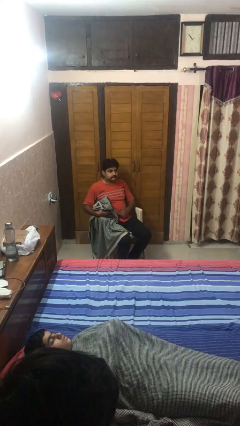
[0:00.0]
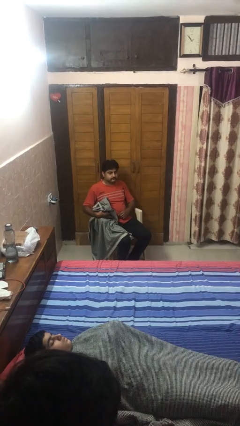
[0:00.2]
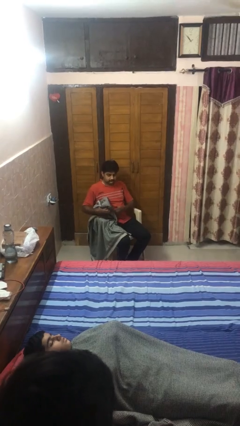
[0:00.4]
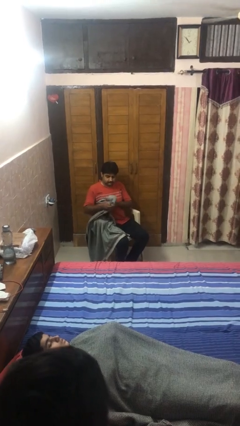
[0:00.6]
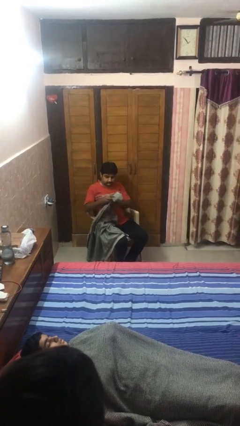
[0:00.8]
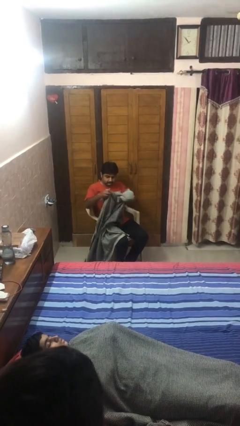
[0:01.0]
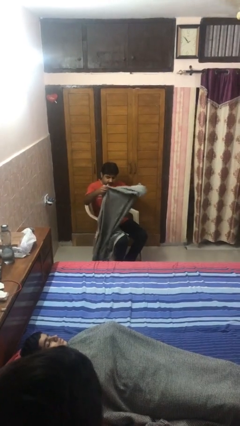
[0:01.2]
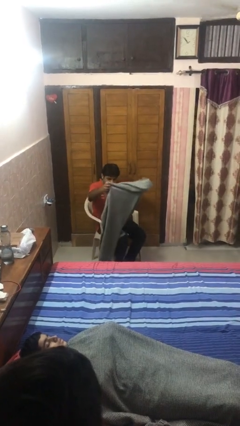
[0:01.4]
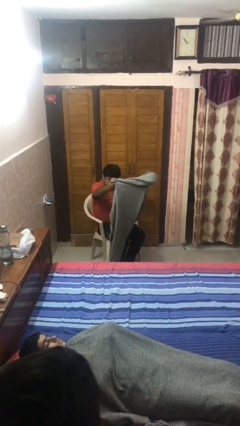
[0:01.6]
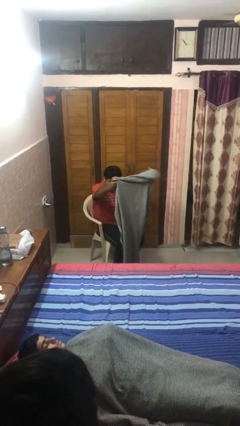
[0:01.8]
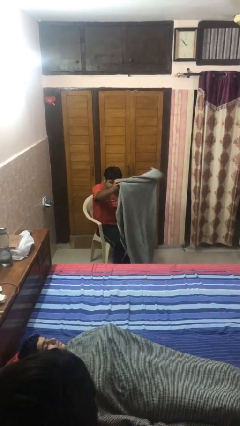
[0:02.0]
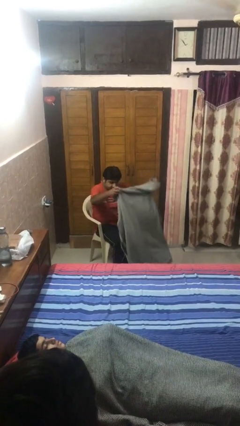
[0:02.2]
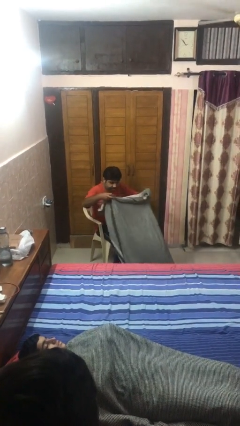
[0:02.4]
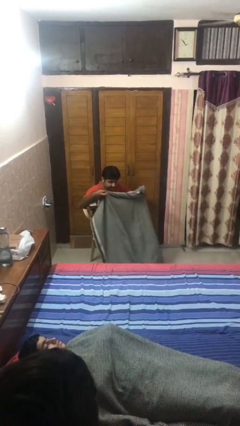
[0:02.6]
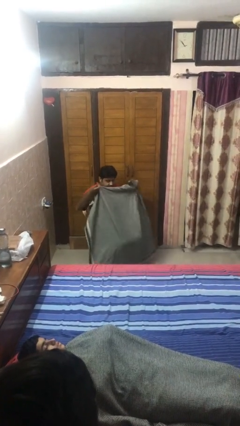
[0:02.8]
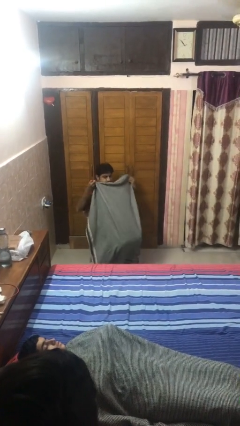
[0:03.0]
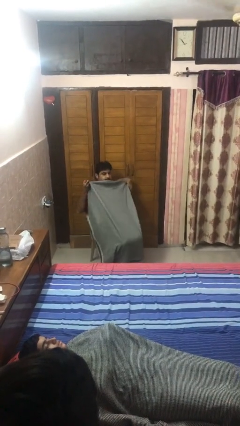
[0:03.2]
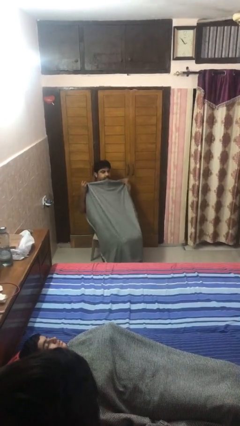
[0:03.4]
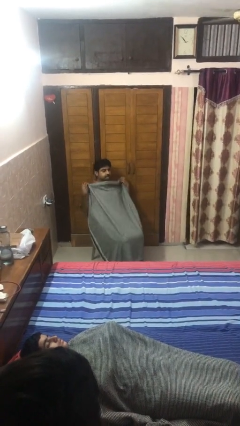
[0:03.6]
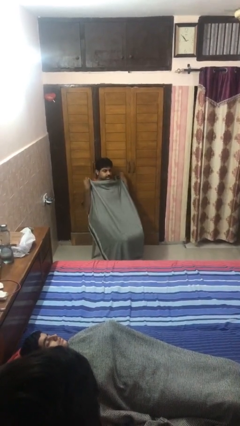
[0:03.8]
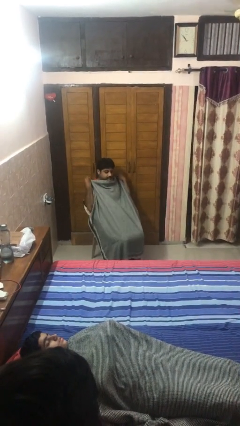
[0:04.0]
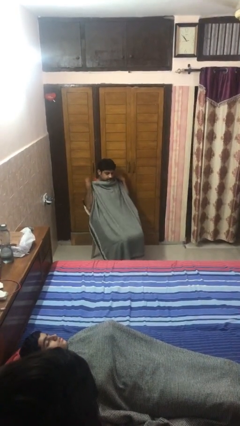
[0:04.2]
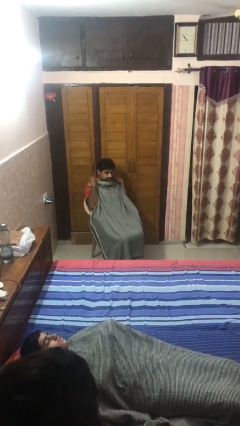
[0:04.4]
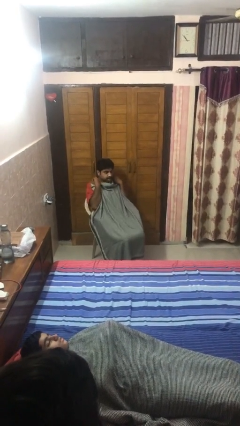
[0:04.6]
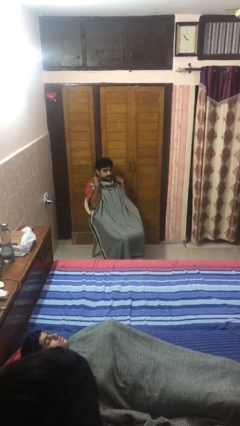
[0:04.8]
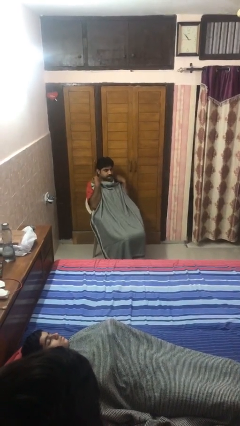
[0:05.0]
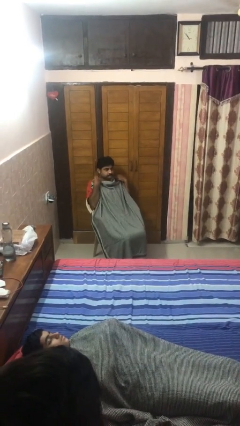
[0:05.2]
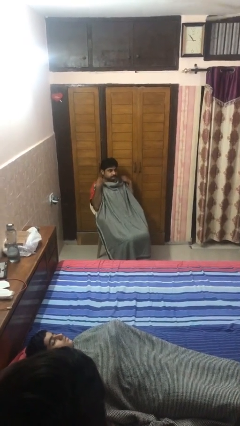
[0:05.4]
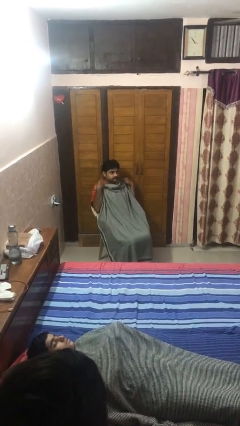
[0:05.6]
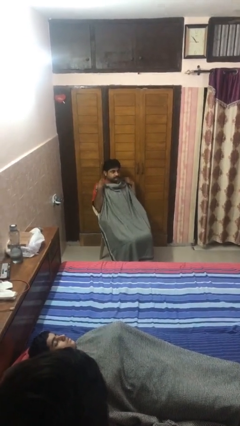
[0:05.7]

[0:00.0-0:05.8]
person covers with blanket

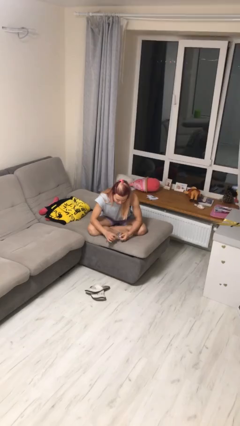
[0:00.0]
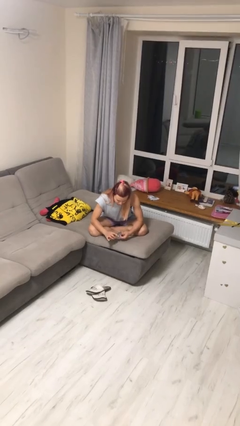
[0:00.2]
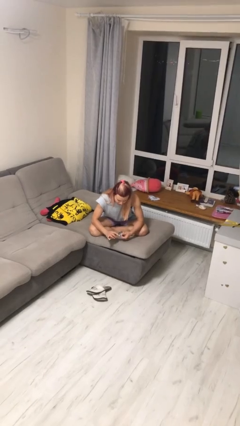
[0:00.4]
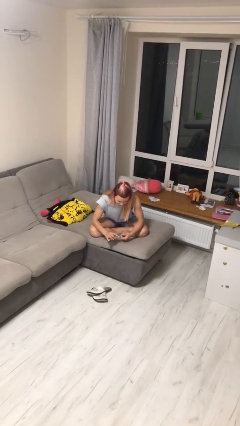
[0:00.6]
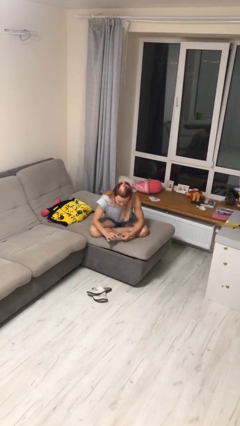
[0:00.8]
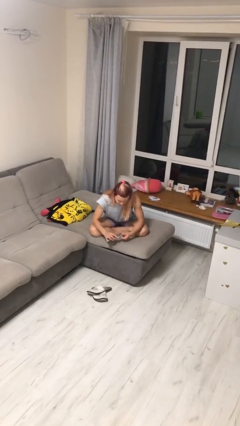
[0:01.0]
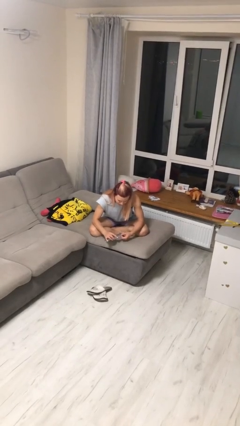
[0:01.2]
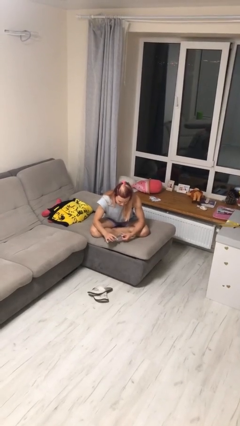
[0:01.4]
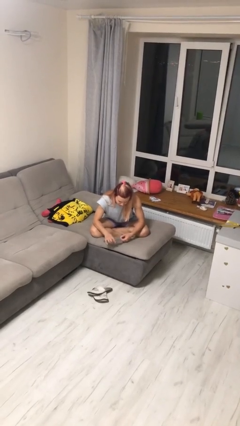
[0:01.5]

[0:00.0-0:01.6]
person files fingernails

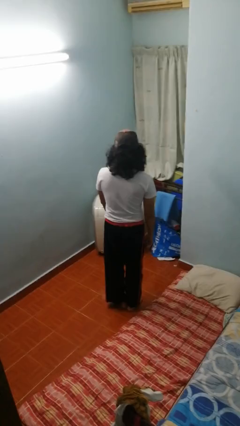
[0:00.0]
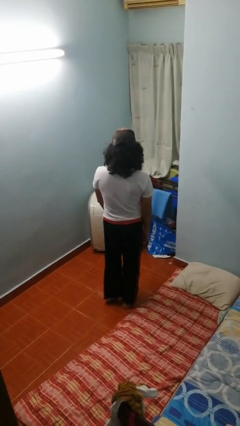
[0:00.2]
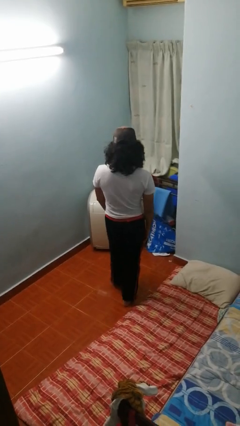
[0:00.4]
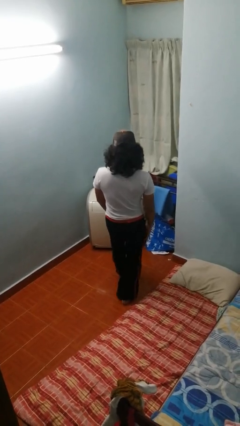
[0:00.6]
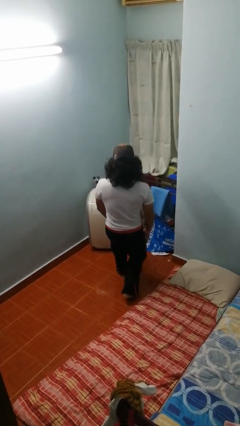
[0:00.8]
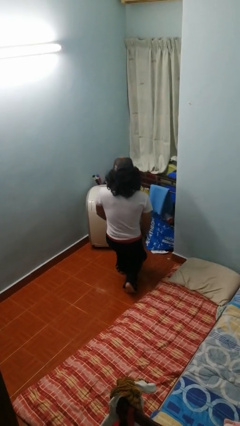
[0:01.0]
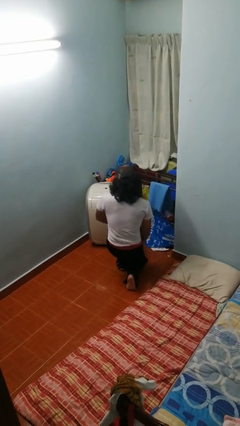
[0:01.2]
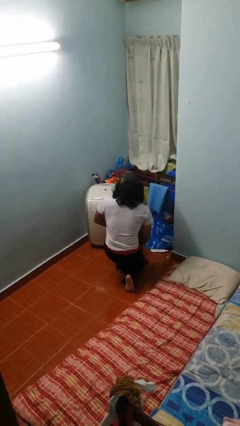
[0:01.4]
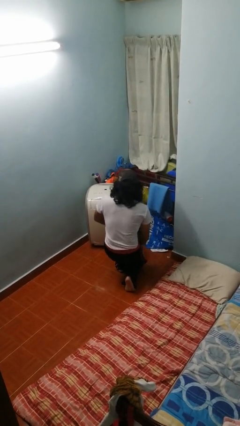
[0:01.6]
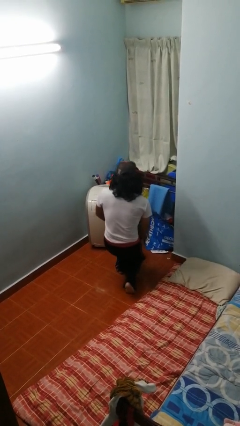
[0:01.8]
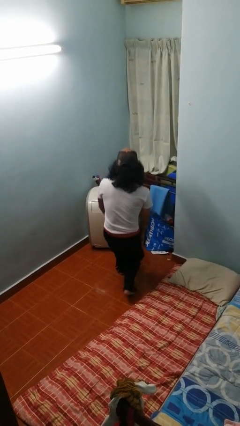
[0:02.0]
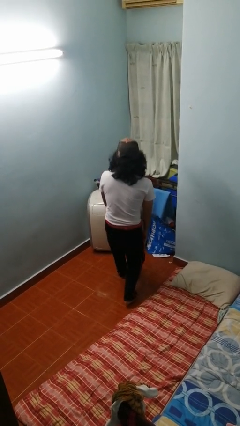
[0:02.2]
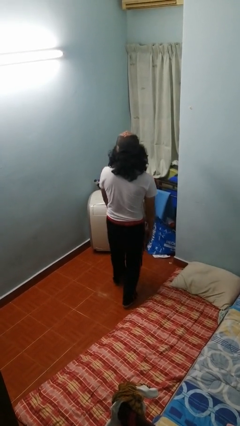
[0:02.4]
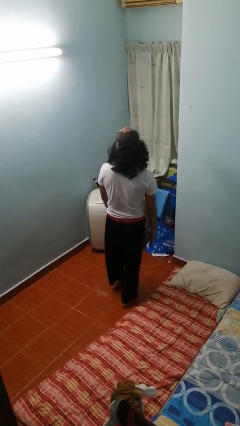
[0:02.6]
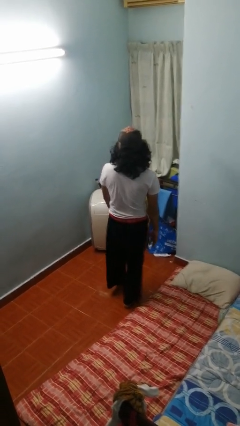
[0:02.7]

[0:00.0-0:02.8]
person exercises with lunges

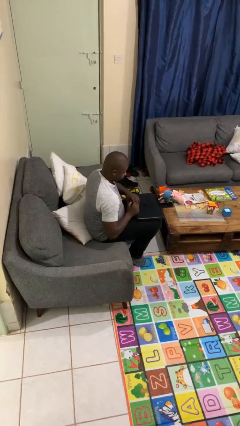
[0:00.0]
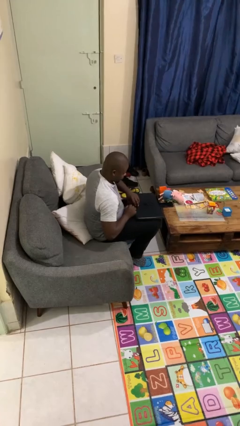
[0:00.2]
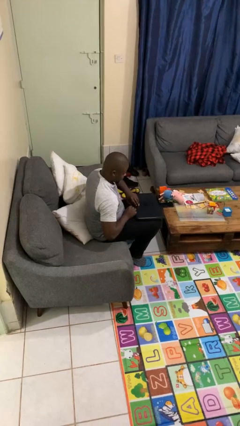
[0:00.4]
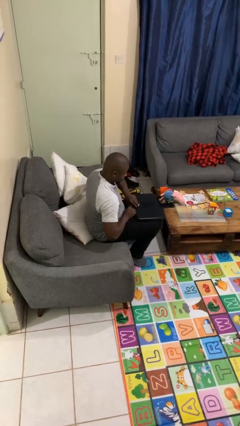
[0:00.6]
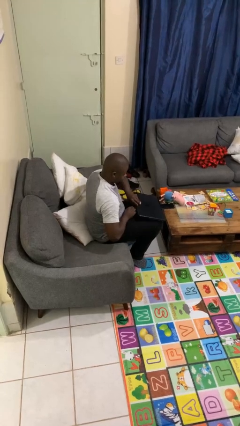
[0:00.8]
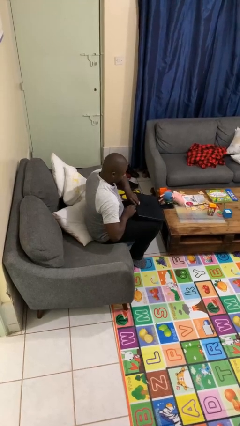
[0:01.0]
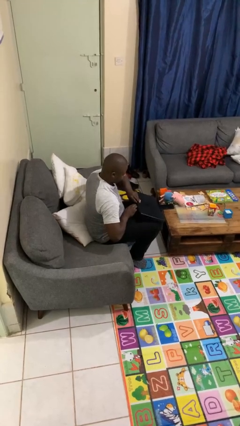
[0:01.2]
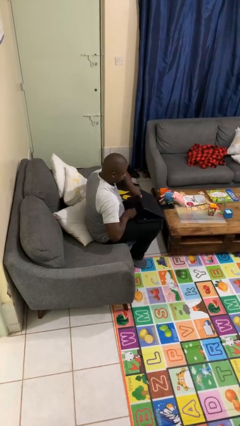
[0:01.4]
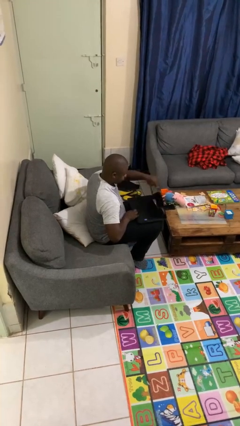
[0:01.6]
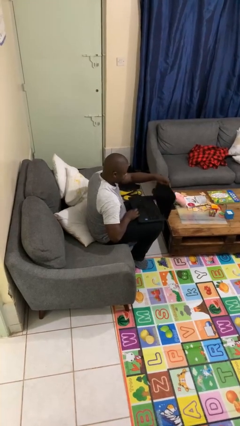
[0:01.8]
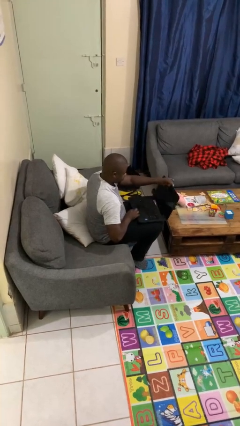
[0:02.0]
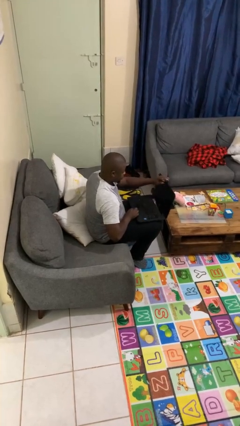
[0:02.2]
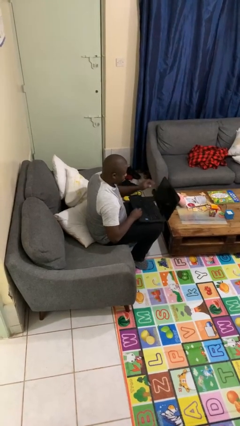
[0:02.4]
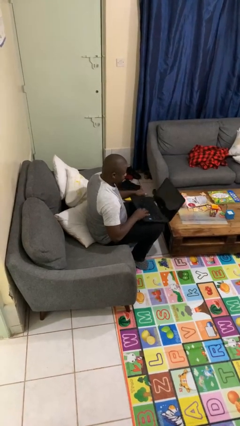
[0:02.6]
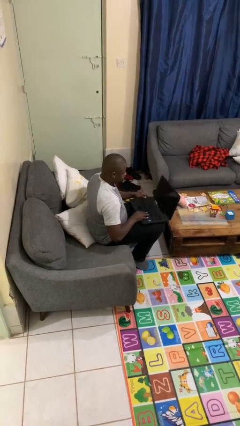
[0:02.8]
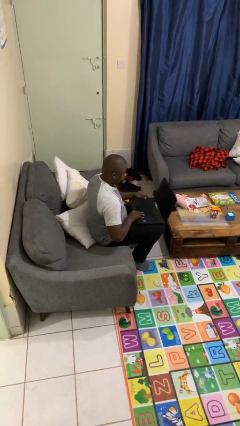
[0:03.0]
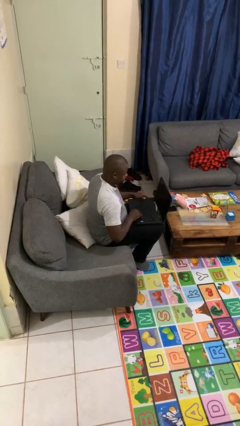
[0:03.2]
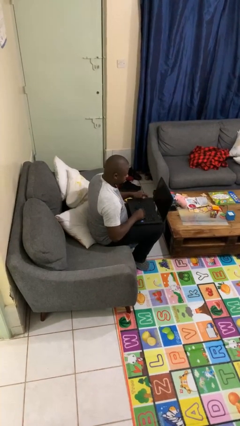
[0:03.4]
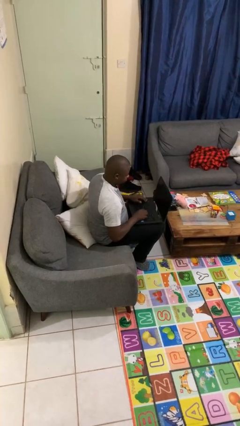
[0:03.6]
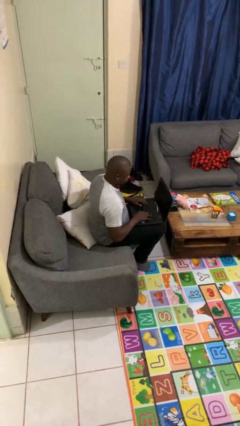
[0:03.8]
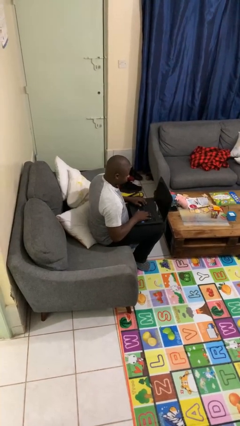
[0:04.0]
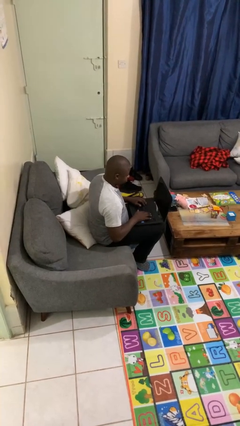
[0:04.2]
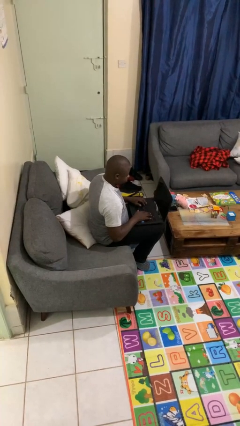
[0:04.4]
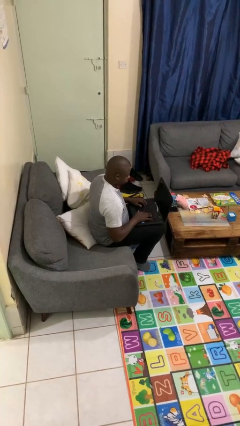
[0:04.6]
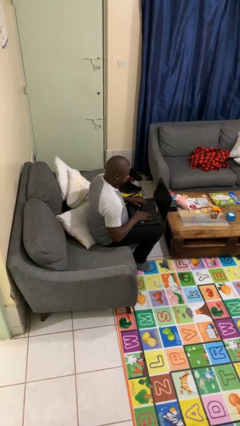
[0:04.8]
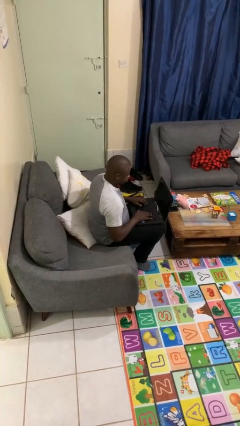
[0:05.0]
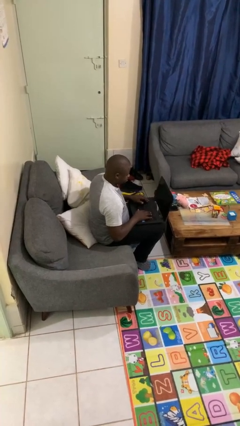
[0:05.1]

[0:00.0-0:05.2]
person opens laptop

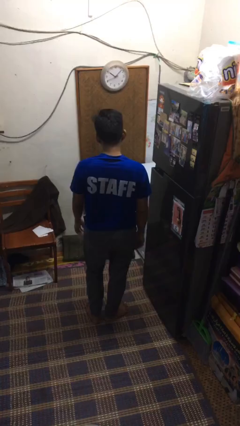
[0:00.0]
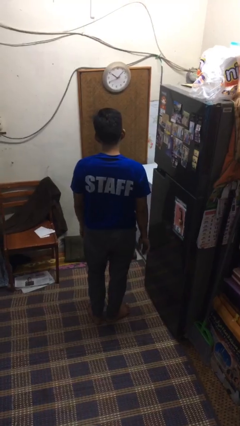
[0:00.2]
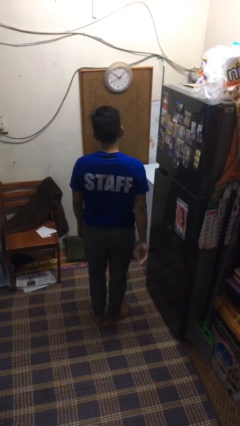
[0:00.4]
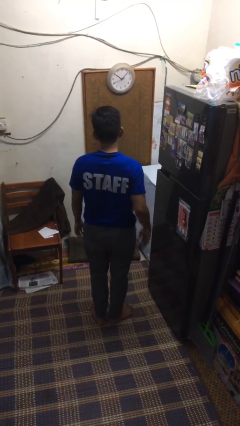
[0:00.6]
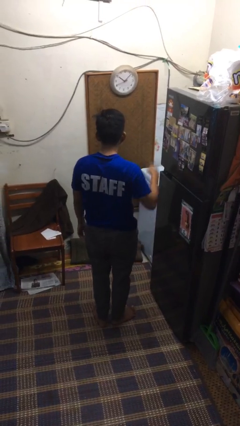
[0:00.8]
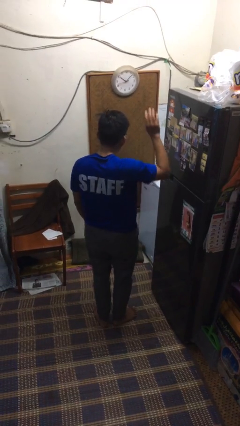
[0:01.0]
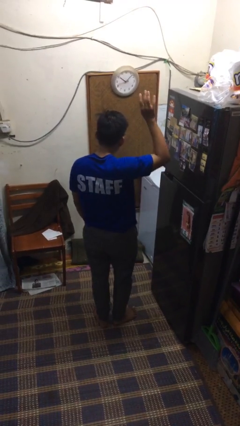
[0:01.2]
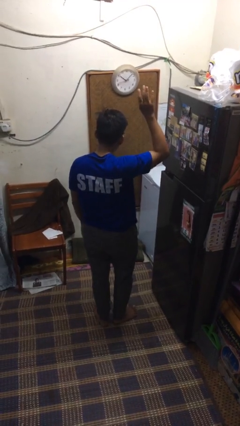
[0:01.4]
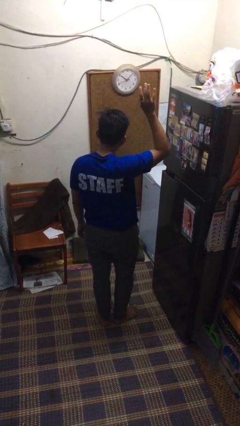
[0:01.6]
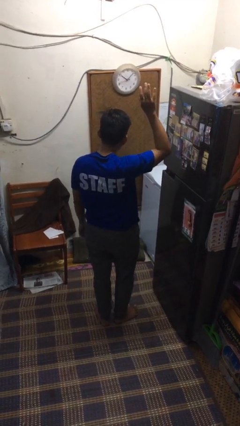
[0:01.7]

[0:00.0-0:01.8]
person gestures raise hand

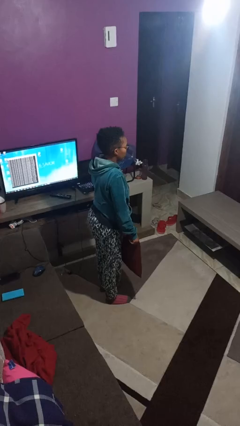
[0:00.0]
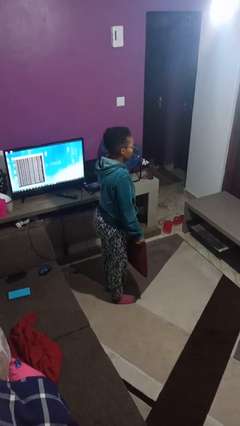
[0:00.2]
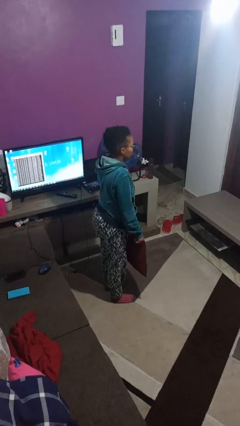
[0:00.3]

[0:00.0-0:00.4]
person throws object on table
